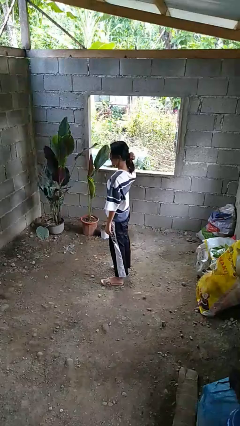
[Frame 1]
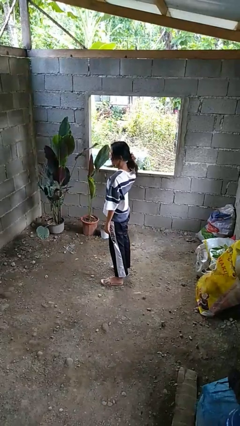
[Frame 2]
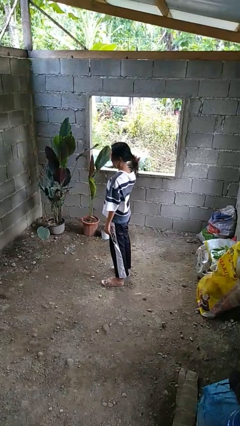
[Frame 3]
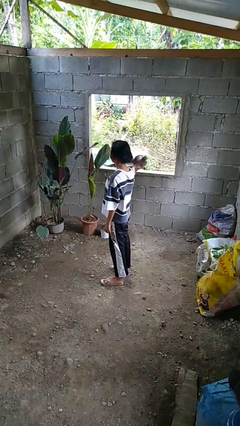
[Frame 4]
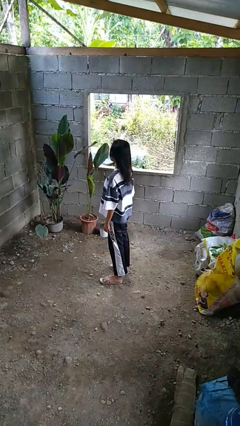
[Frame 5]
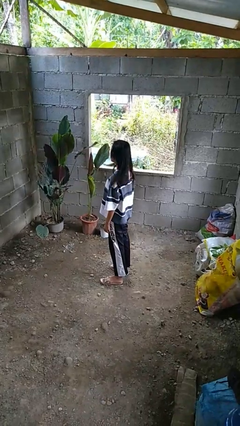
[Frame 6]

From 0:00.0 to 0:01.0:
person takes off hairtie

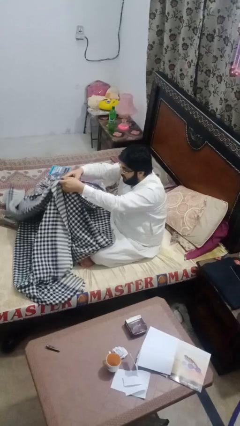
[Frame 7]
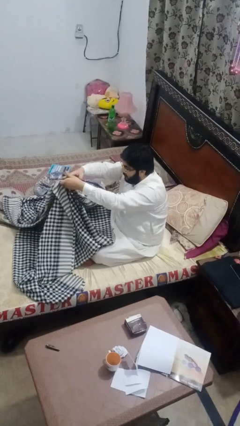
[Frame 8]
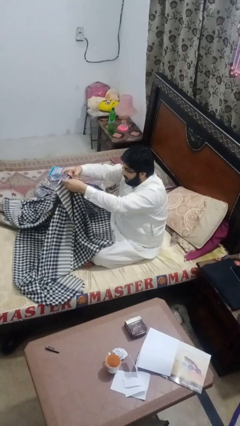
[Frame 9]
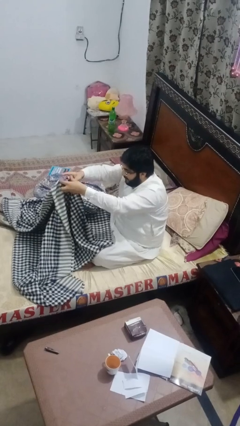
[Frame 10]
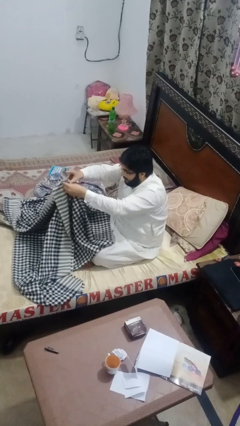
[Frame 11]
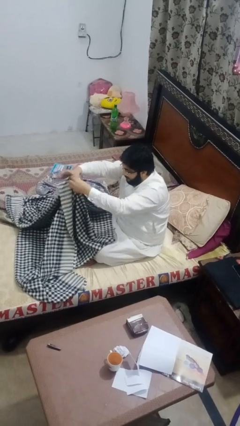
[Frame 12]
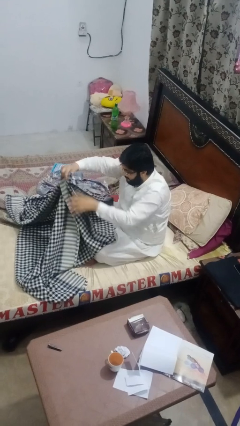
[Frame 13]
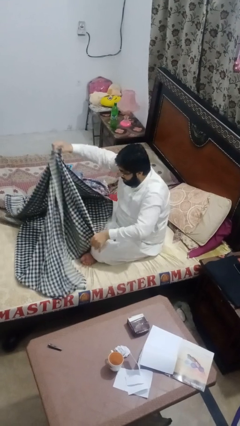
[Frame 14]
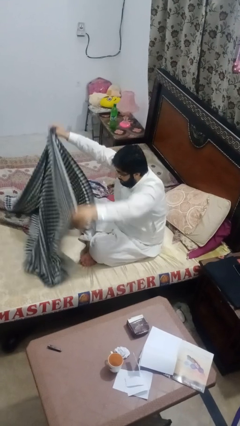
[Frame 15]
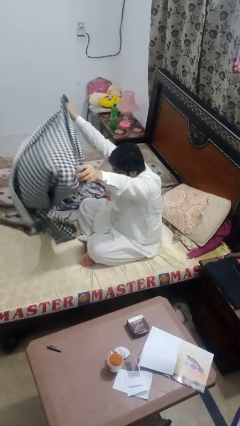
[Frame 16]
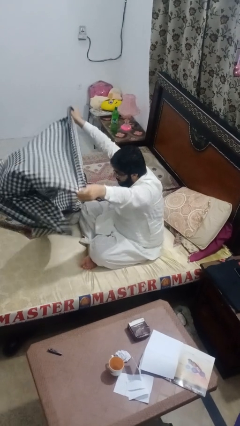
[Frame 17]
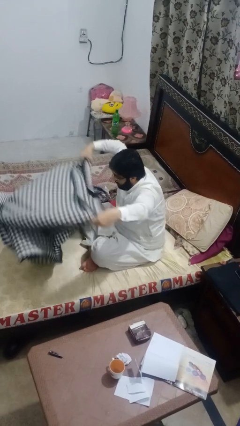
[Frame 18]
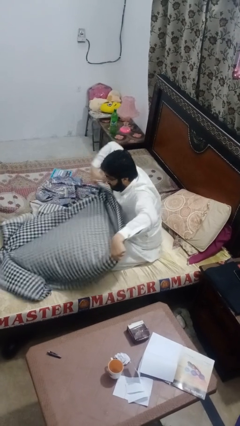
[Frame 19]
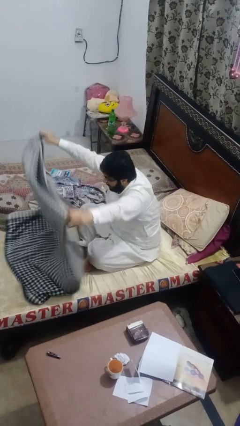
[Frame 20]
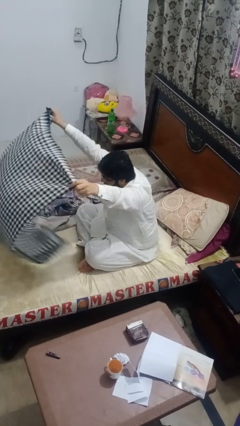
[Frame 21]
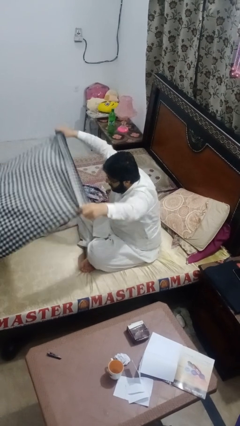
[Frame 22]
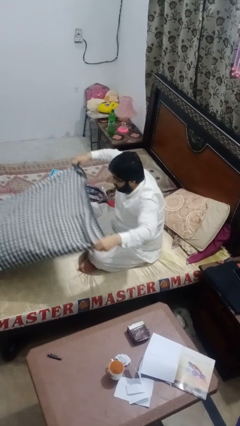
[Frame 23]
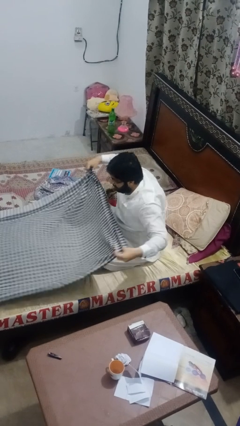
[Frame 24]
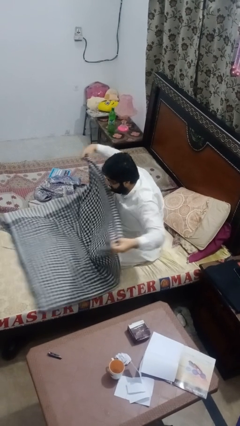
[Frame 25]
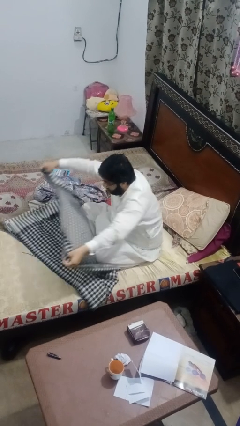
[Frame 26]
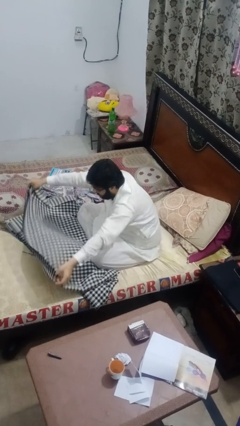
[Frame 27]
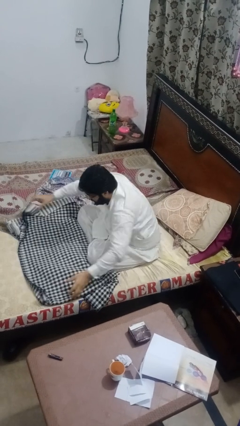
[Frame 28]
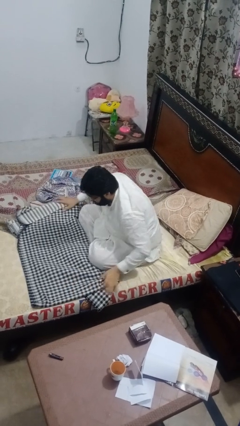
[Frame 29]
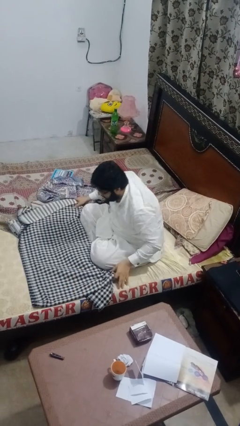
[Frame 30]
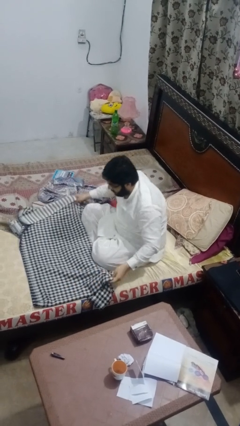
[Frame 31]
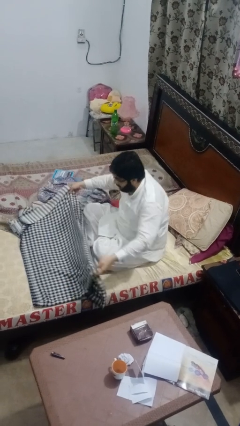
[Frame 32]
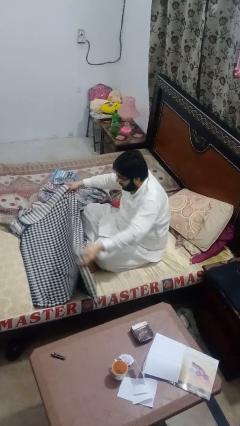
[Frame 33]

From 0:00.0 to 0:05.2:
person folds blanket

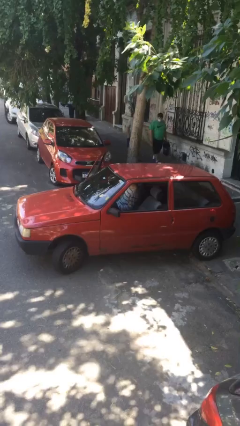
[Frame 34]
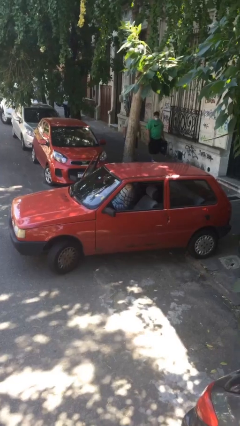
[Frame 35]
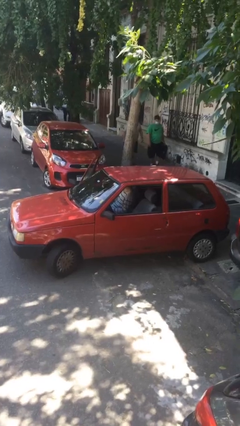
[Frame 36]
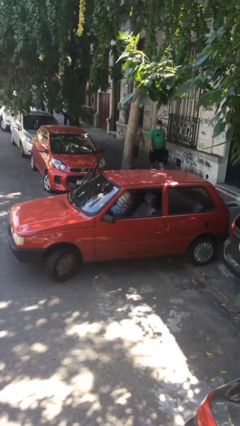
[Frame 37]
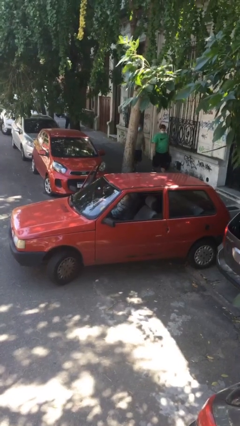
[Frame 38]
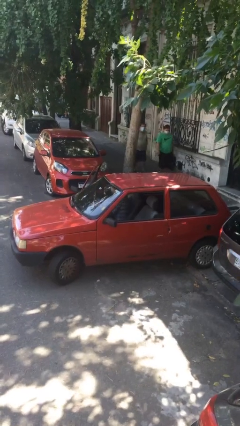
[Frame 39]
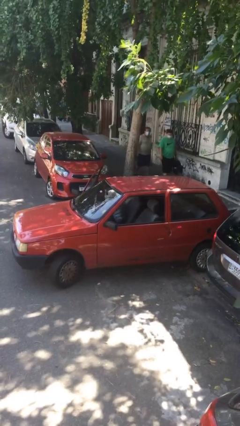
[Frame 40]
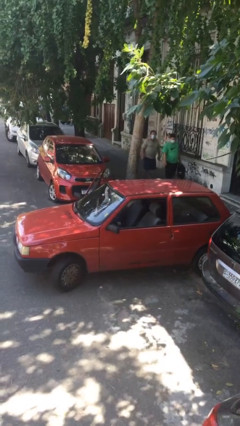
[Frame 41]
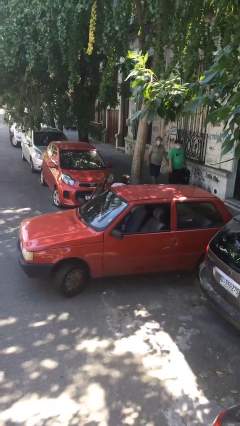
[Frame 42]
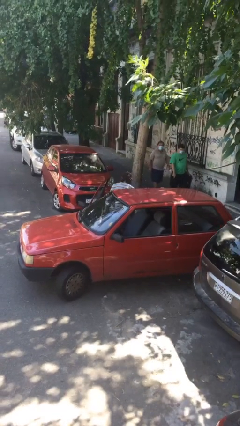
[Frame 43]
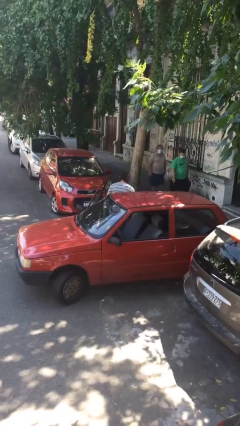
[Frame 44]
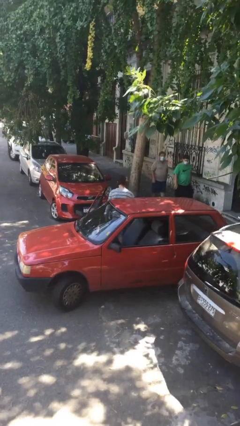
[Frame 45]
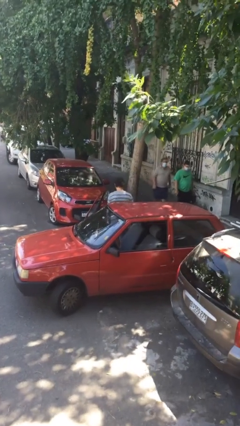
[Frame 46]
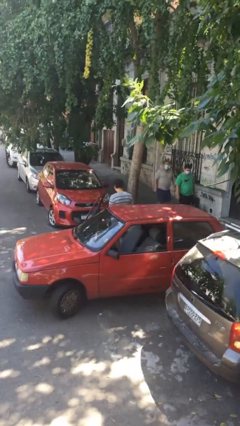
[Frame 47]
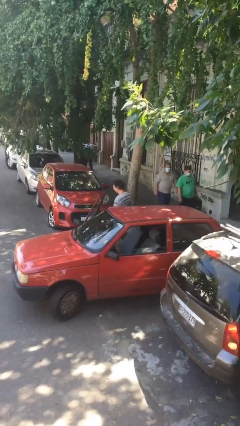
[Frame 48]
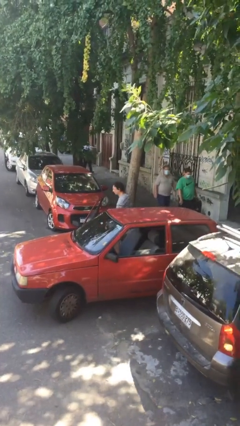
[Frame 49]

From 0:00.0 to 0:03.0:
person exits car

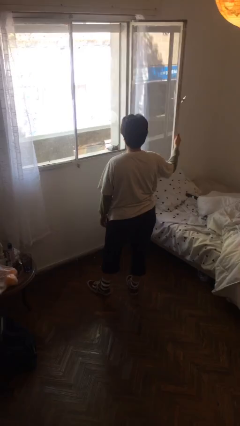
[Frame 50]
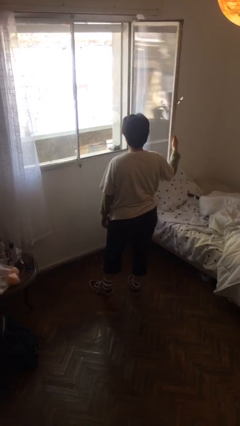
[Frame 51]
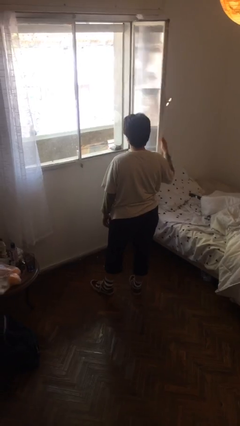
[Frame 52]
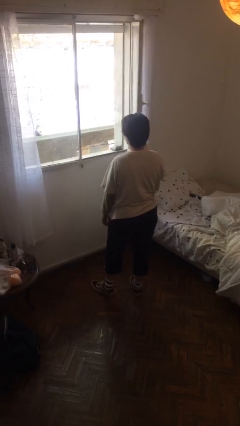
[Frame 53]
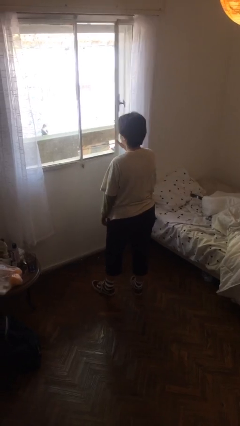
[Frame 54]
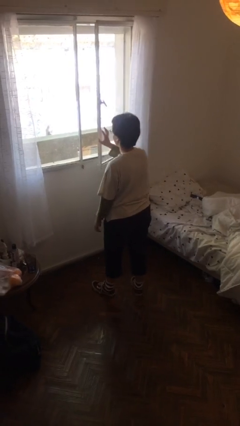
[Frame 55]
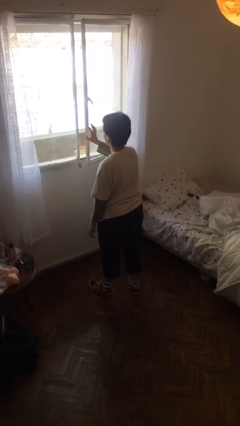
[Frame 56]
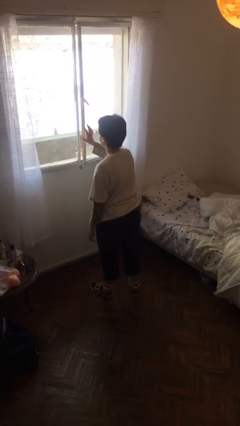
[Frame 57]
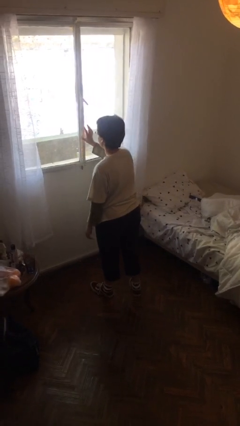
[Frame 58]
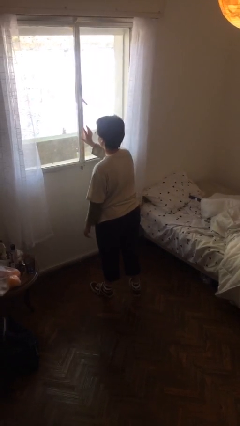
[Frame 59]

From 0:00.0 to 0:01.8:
person closes home window

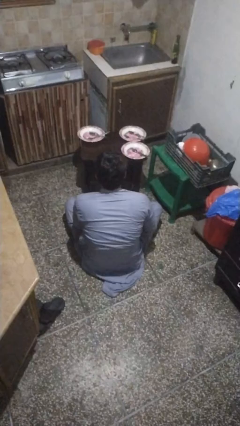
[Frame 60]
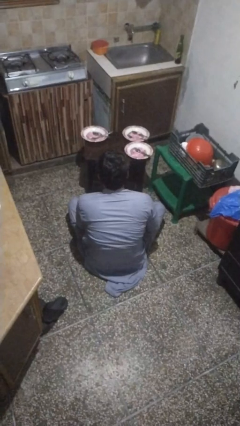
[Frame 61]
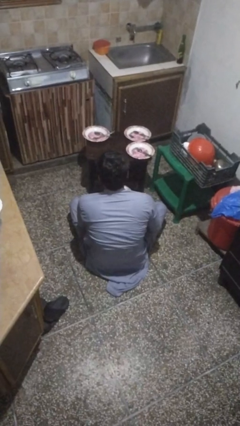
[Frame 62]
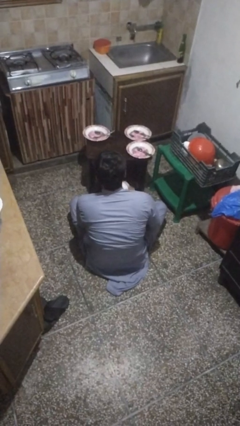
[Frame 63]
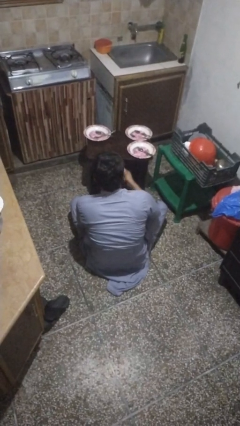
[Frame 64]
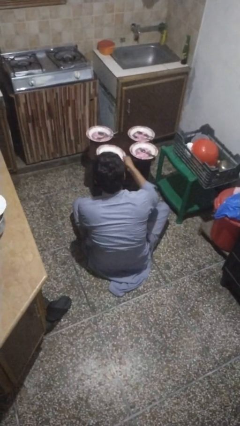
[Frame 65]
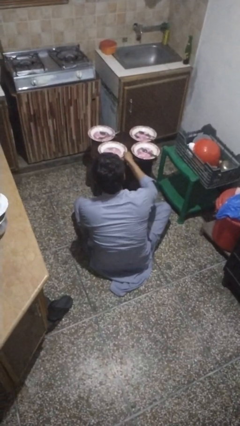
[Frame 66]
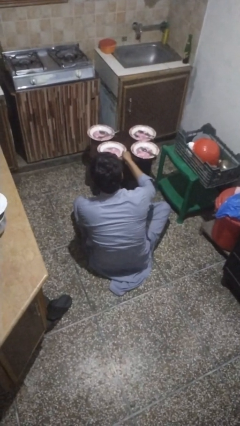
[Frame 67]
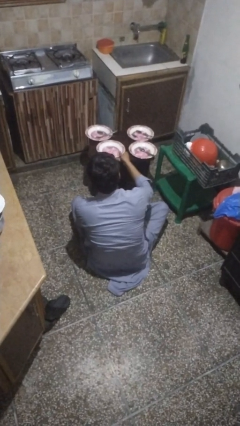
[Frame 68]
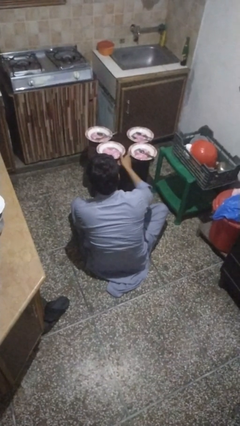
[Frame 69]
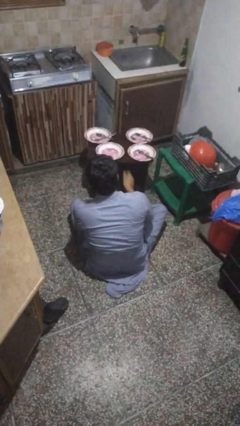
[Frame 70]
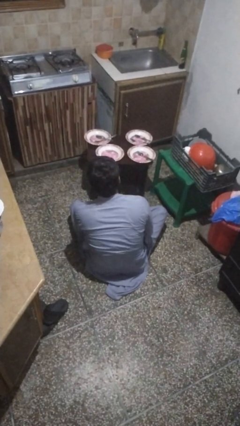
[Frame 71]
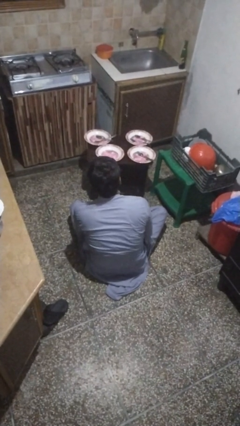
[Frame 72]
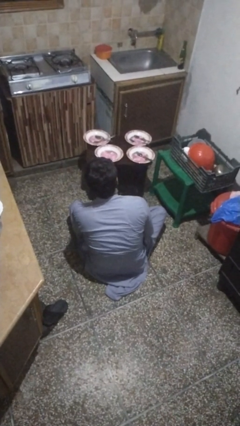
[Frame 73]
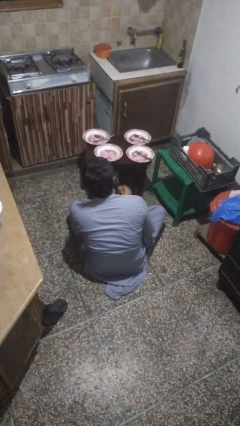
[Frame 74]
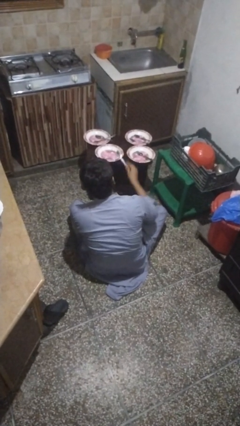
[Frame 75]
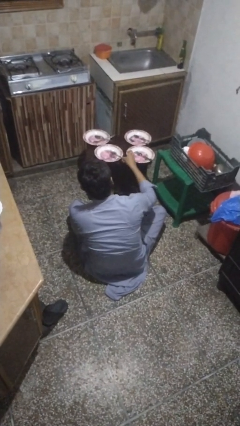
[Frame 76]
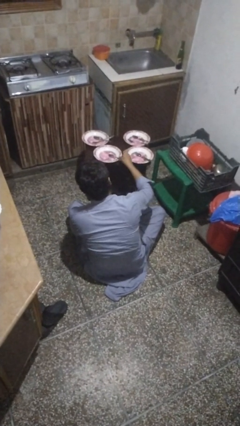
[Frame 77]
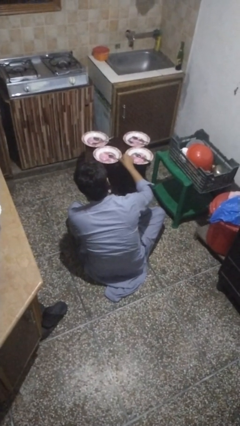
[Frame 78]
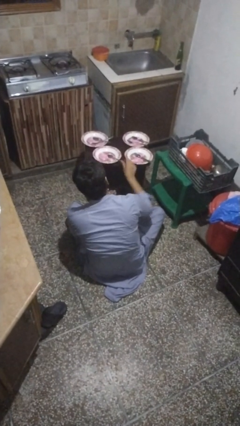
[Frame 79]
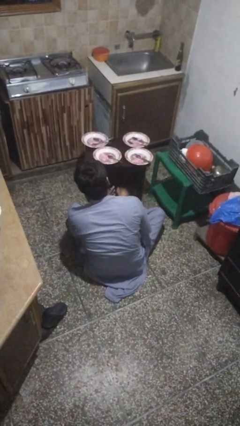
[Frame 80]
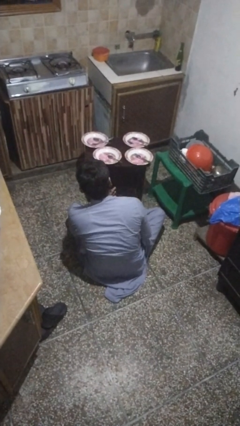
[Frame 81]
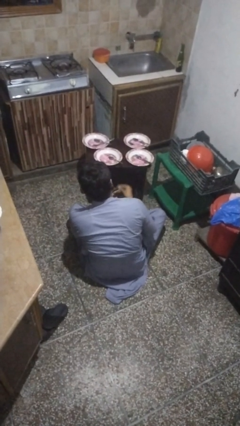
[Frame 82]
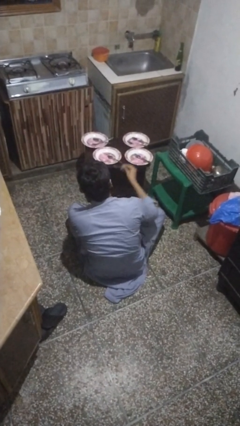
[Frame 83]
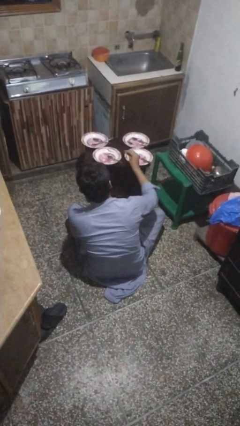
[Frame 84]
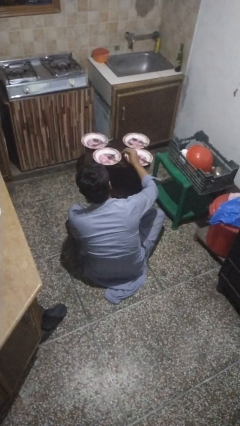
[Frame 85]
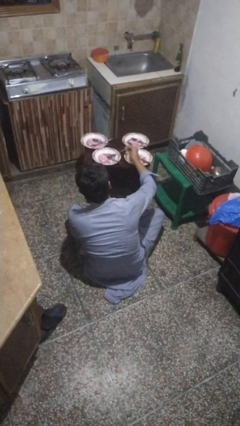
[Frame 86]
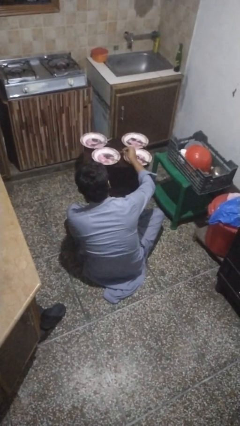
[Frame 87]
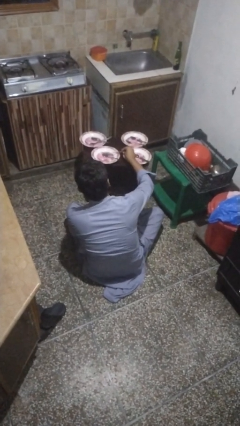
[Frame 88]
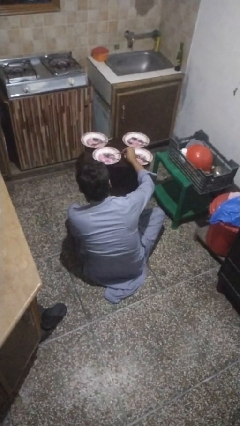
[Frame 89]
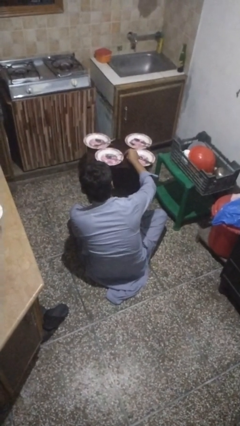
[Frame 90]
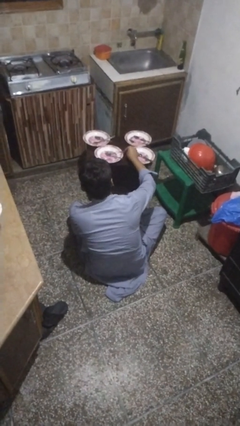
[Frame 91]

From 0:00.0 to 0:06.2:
person sets table

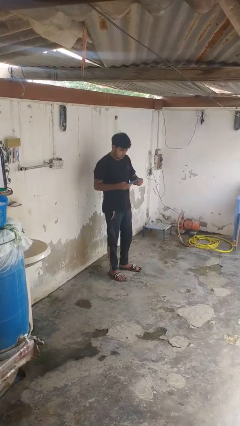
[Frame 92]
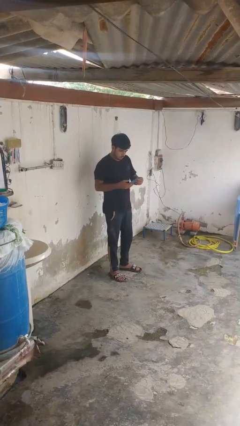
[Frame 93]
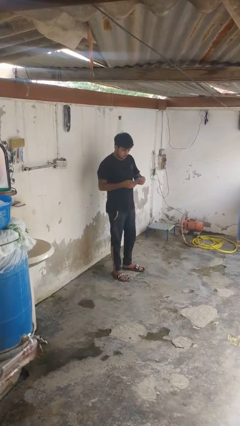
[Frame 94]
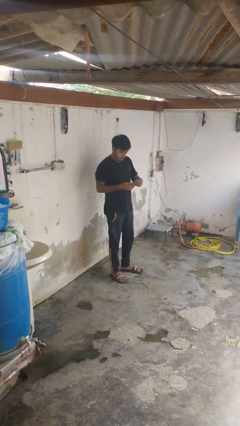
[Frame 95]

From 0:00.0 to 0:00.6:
person puts phone into pocket
